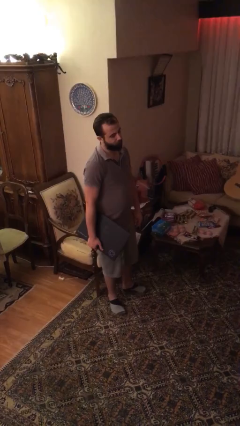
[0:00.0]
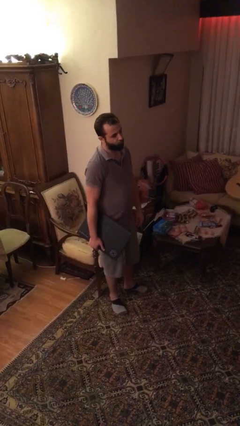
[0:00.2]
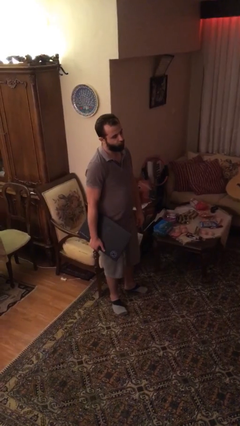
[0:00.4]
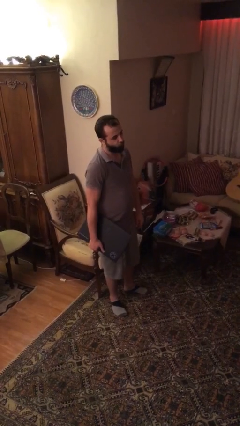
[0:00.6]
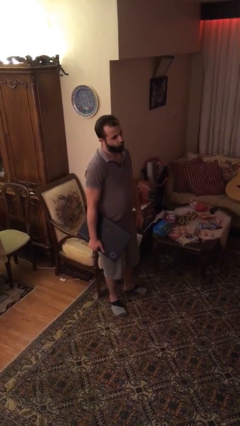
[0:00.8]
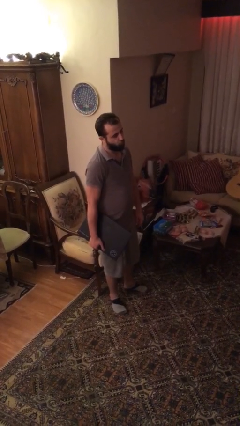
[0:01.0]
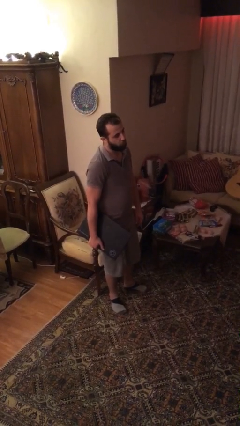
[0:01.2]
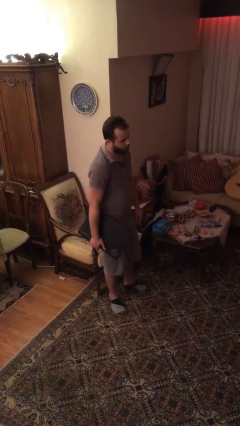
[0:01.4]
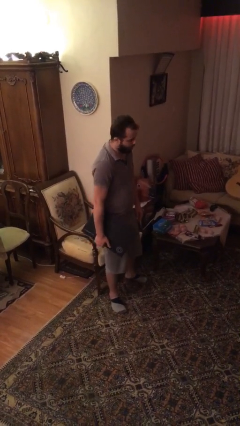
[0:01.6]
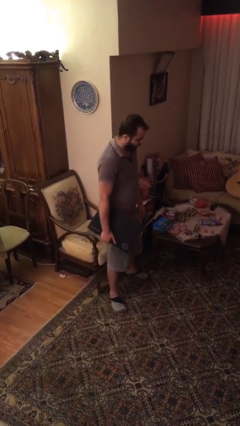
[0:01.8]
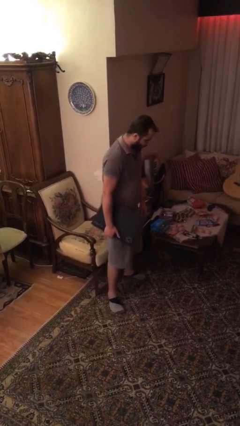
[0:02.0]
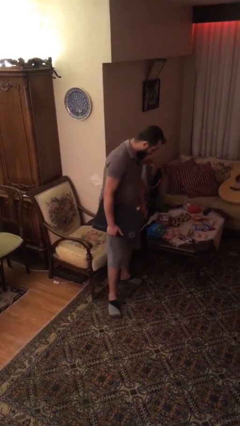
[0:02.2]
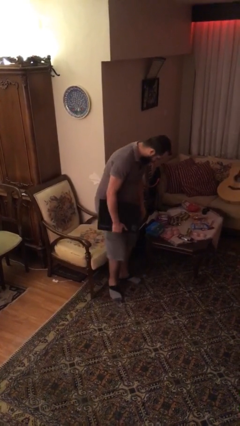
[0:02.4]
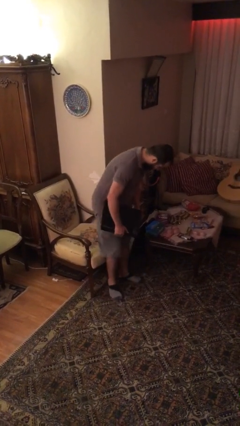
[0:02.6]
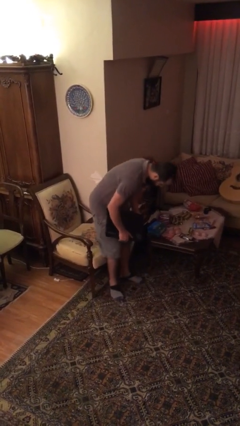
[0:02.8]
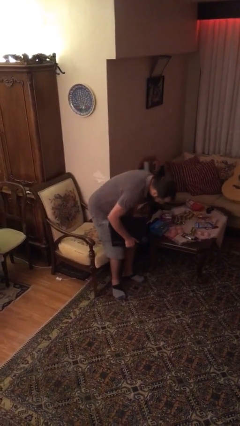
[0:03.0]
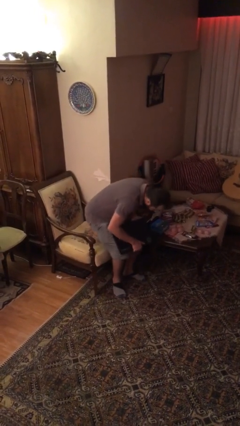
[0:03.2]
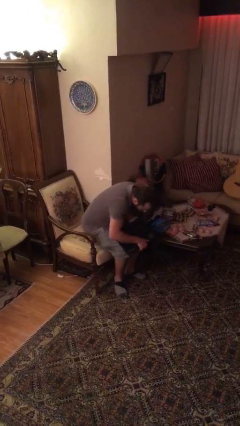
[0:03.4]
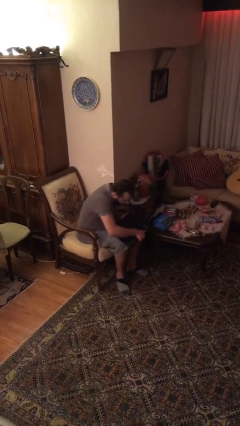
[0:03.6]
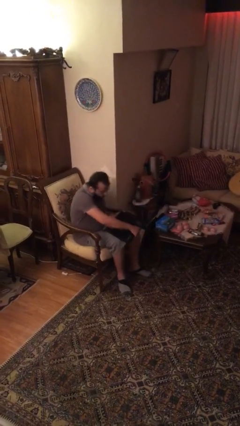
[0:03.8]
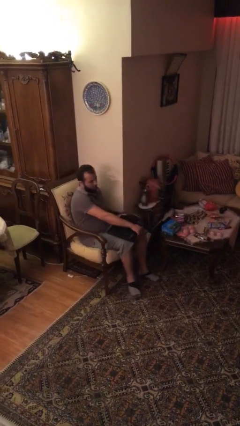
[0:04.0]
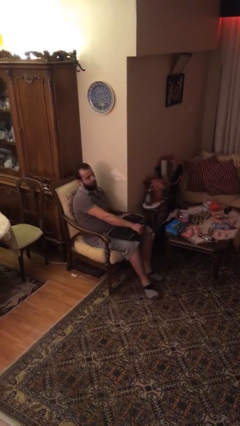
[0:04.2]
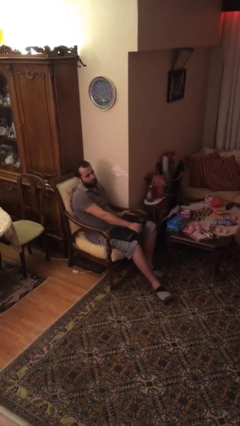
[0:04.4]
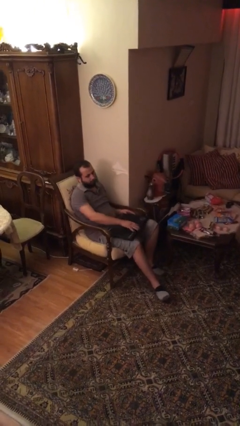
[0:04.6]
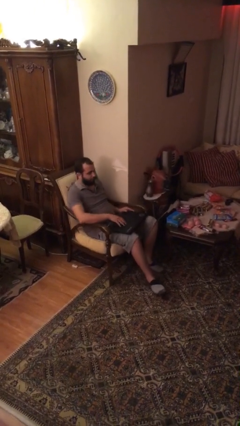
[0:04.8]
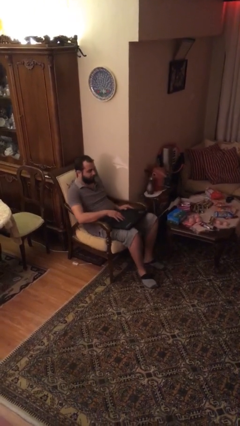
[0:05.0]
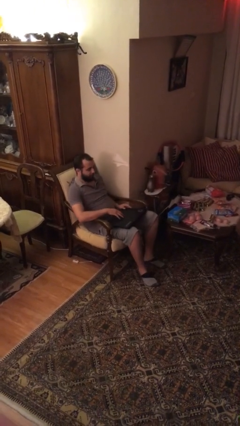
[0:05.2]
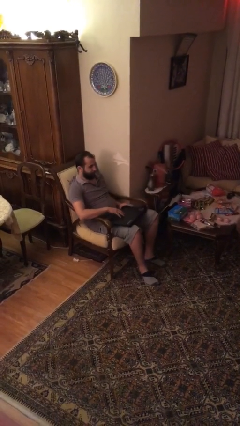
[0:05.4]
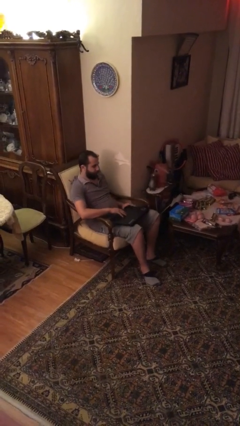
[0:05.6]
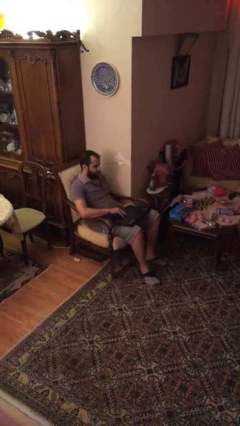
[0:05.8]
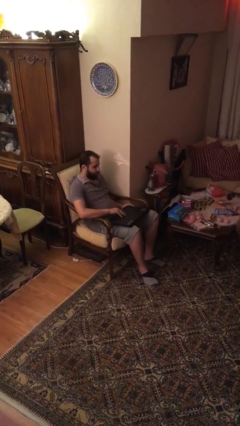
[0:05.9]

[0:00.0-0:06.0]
person sits down

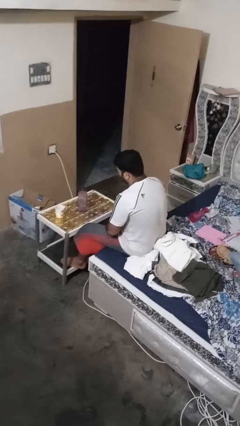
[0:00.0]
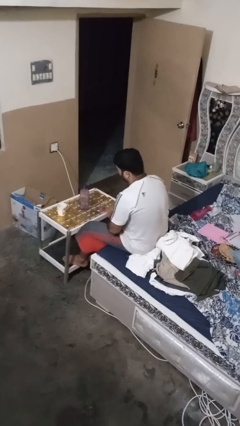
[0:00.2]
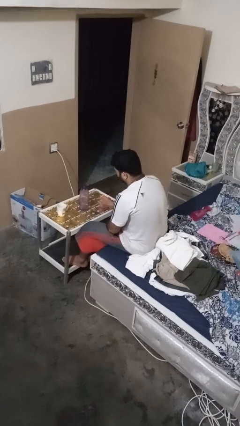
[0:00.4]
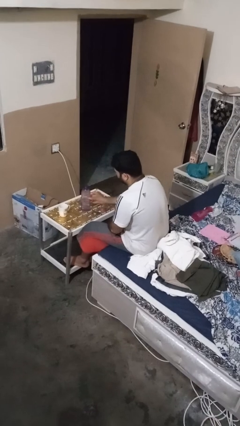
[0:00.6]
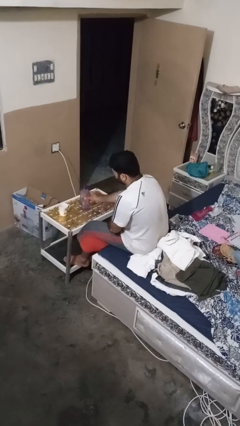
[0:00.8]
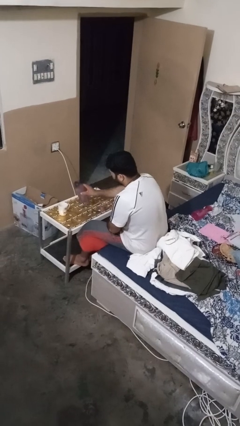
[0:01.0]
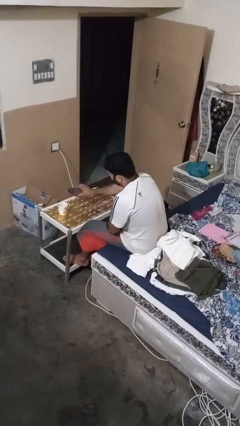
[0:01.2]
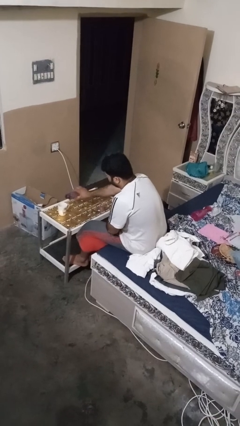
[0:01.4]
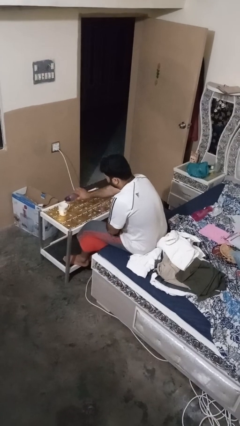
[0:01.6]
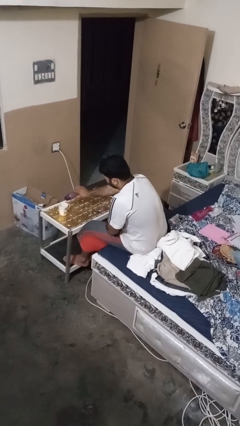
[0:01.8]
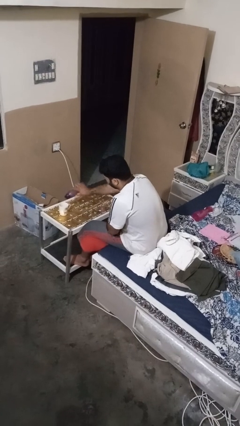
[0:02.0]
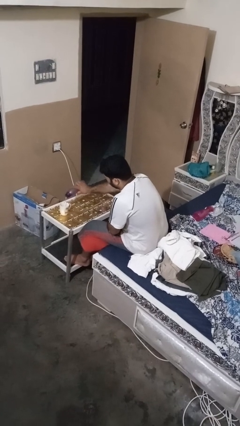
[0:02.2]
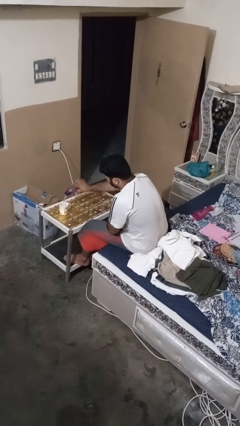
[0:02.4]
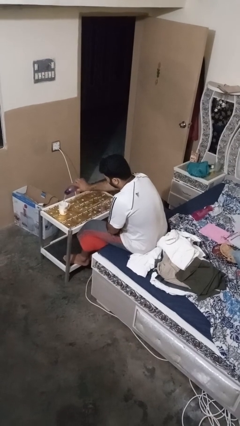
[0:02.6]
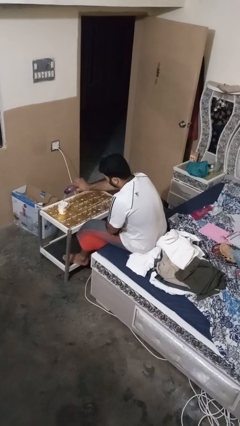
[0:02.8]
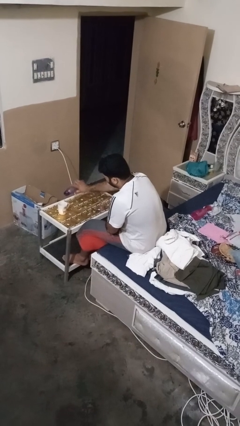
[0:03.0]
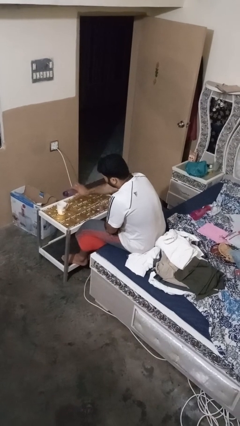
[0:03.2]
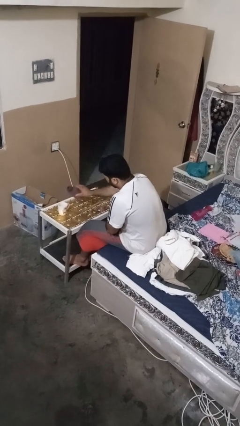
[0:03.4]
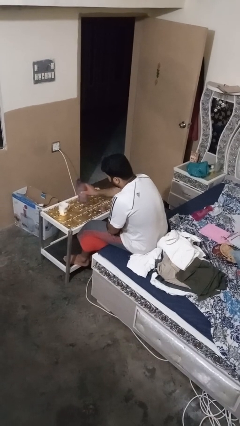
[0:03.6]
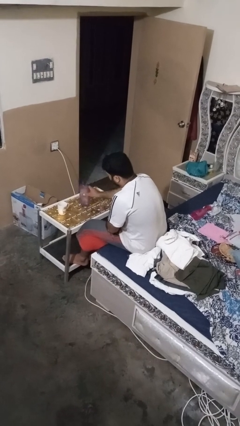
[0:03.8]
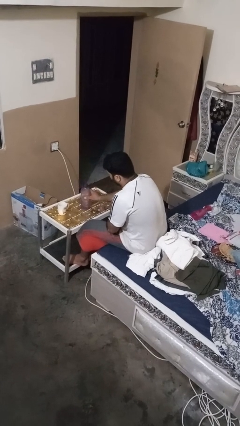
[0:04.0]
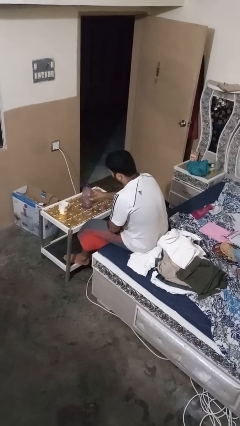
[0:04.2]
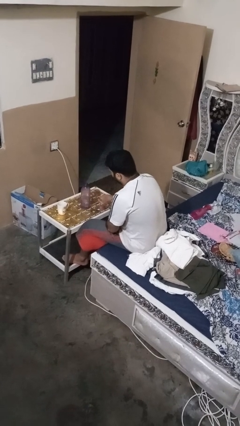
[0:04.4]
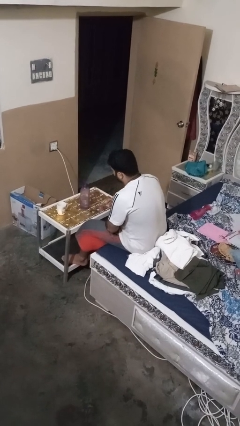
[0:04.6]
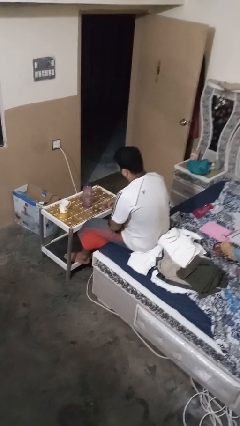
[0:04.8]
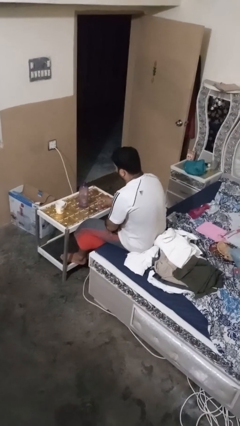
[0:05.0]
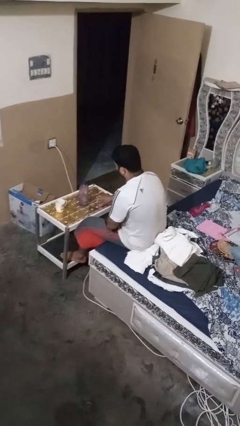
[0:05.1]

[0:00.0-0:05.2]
person pours liquid into cup

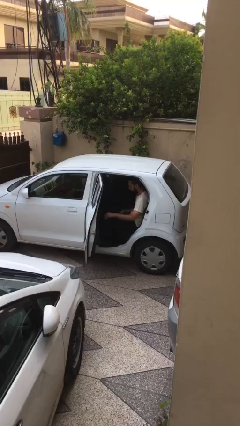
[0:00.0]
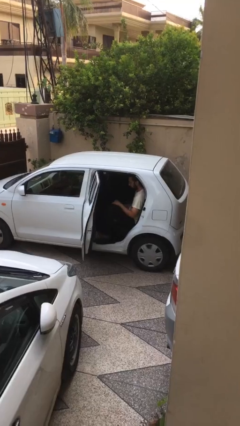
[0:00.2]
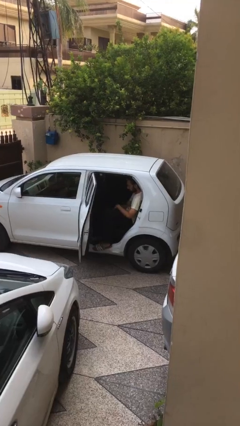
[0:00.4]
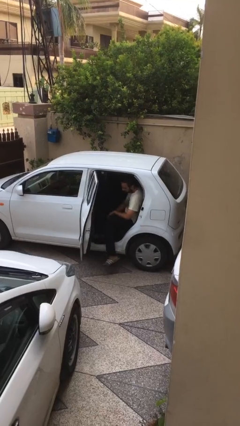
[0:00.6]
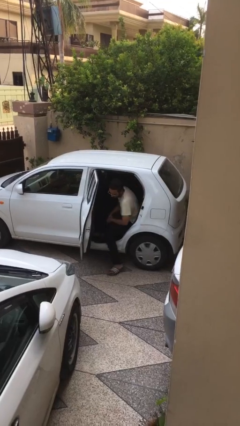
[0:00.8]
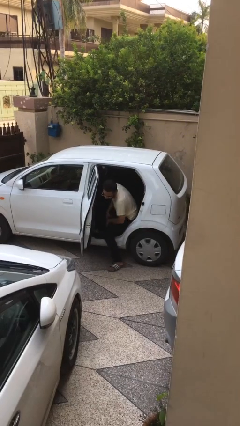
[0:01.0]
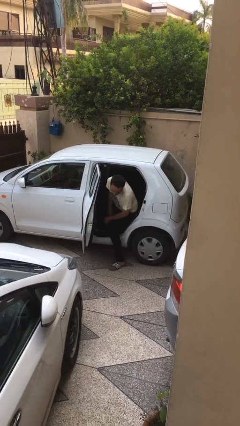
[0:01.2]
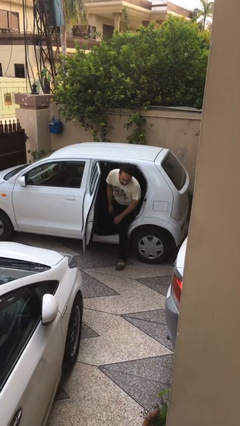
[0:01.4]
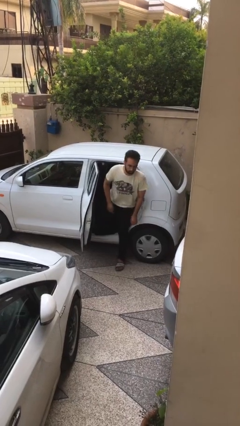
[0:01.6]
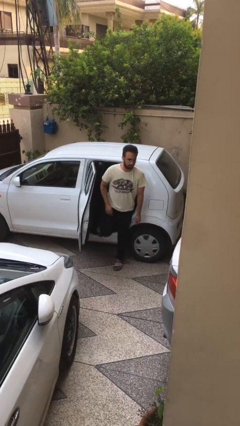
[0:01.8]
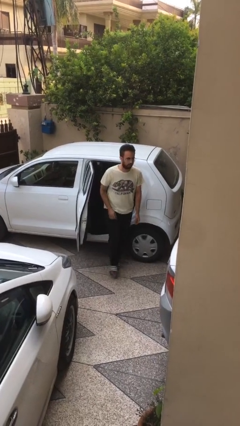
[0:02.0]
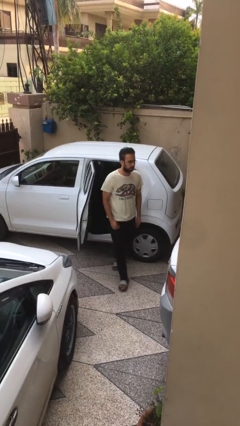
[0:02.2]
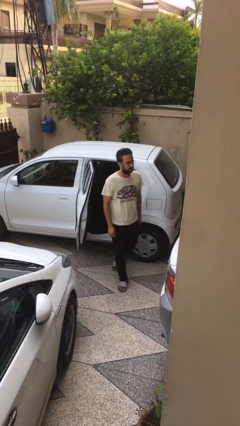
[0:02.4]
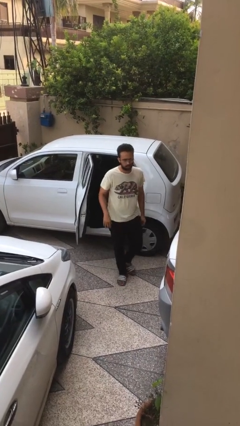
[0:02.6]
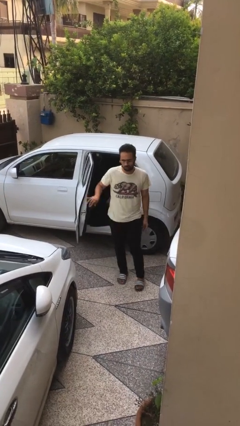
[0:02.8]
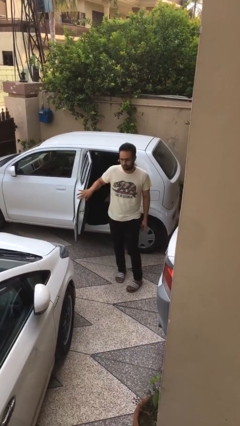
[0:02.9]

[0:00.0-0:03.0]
person exits car

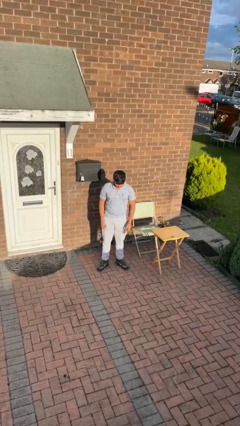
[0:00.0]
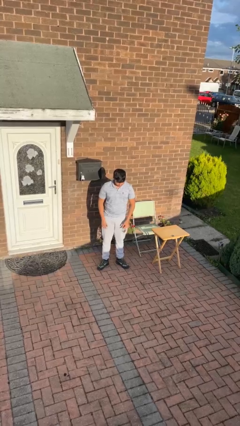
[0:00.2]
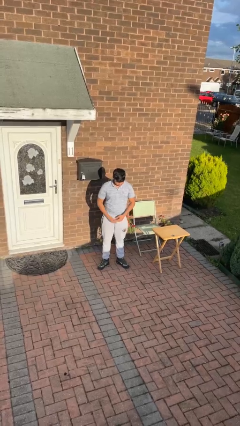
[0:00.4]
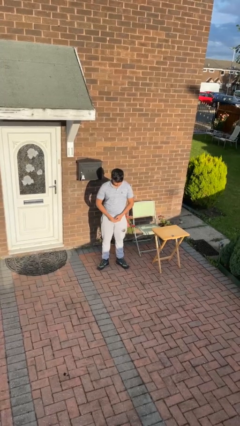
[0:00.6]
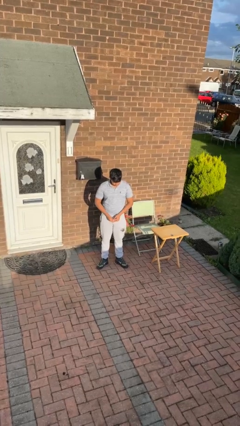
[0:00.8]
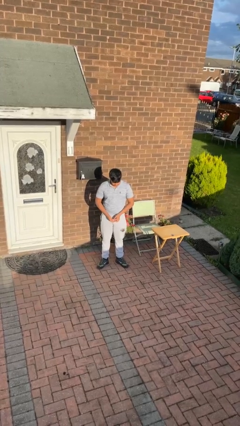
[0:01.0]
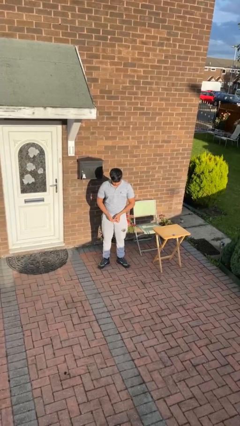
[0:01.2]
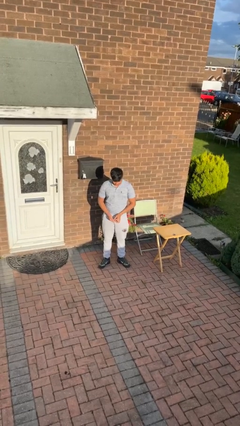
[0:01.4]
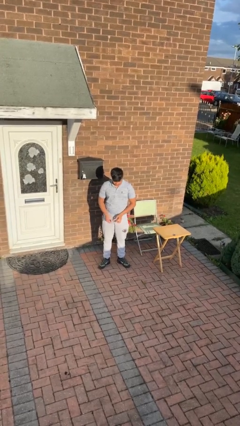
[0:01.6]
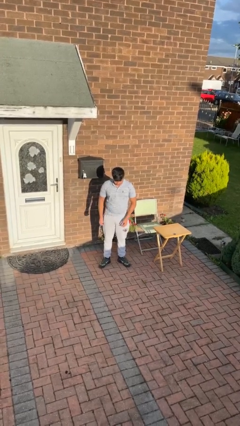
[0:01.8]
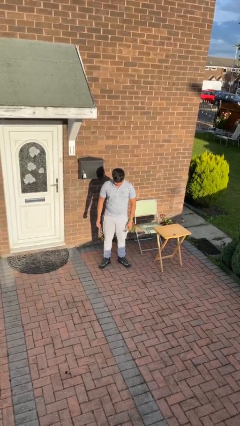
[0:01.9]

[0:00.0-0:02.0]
person takes off ring

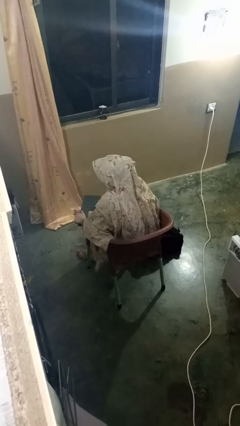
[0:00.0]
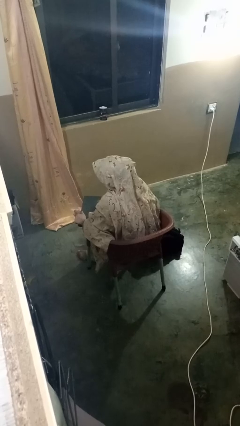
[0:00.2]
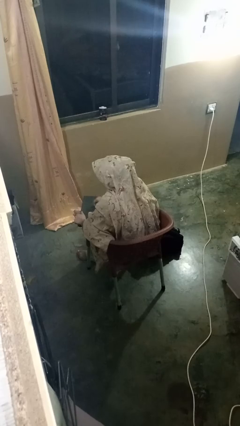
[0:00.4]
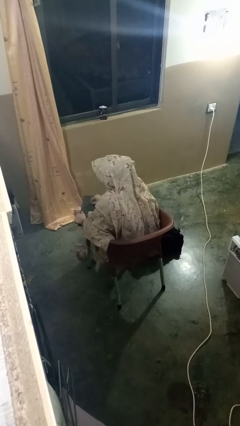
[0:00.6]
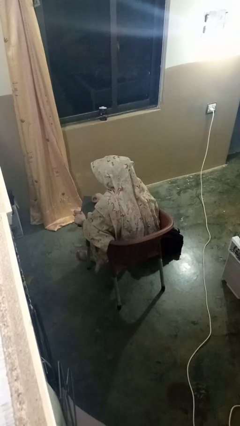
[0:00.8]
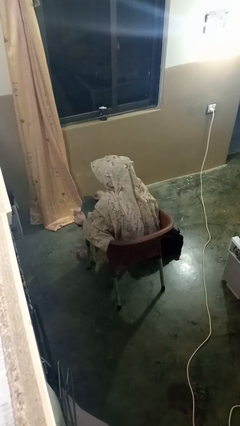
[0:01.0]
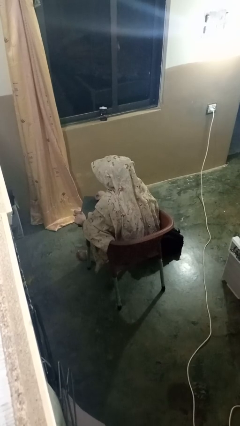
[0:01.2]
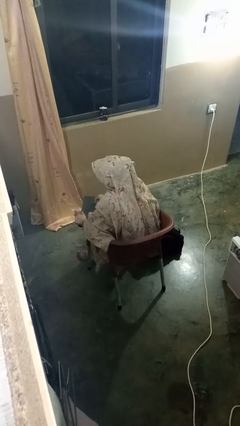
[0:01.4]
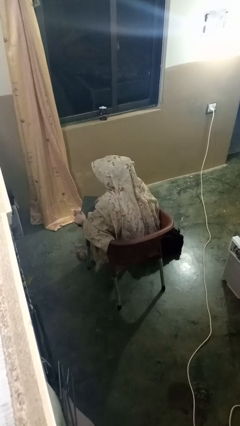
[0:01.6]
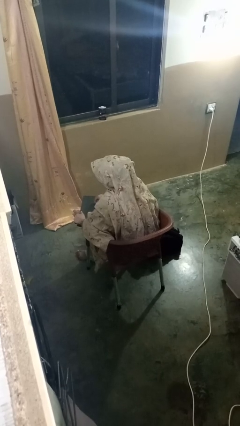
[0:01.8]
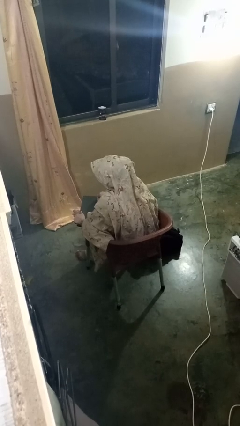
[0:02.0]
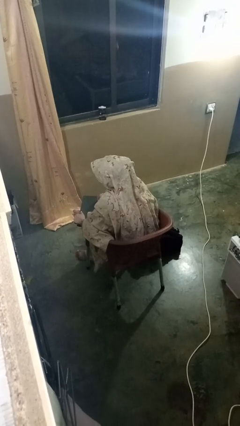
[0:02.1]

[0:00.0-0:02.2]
person interacts with tablet
